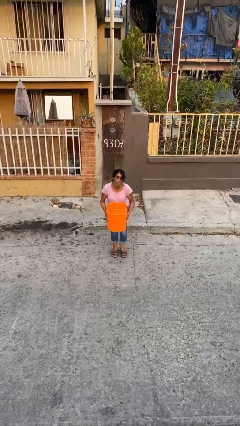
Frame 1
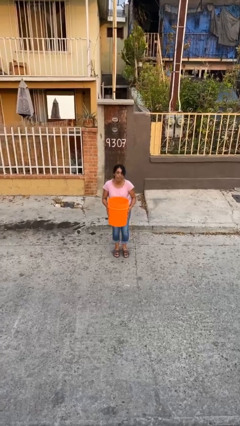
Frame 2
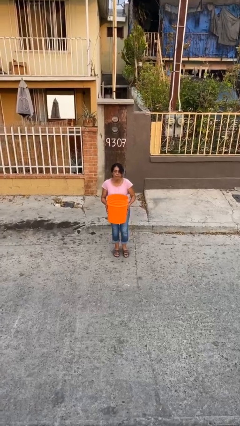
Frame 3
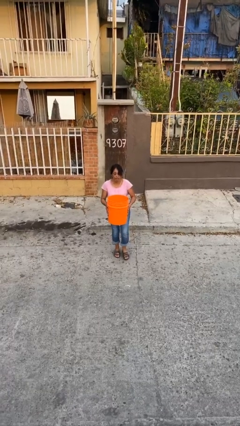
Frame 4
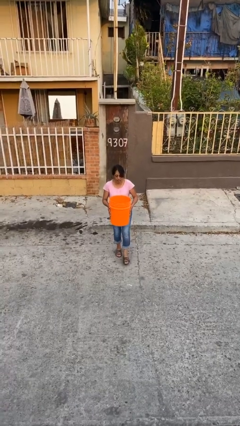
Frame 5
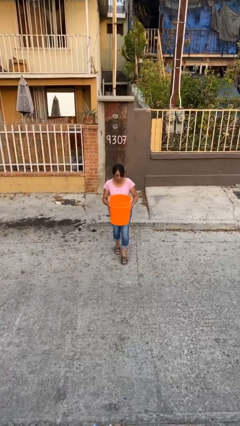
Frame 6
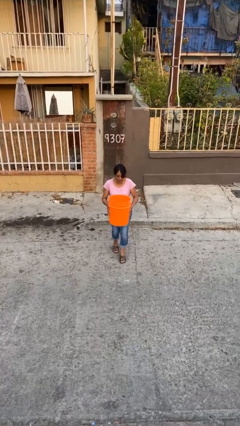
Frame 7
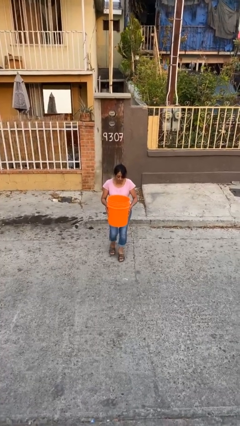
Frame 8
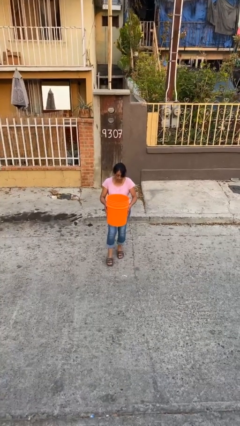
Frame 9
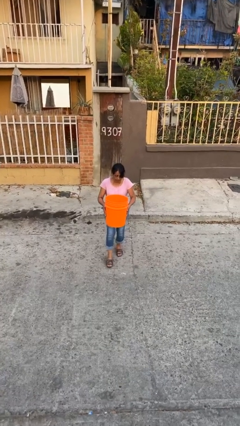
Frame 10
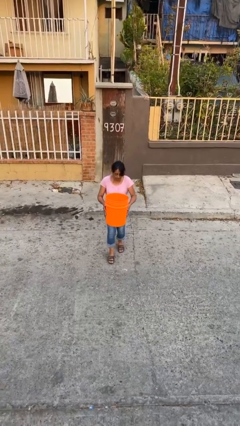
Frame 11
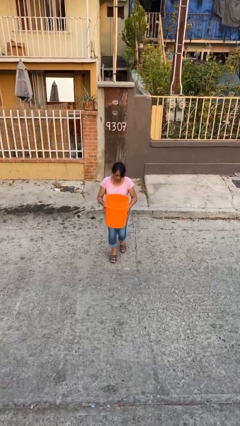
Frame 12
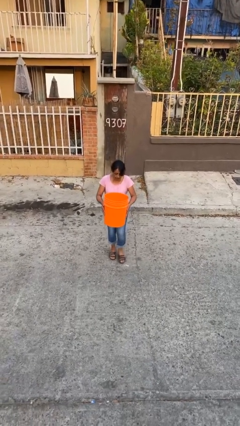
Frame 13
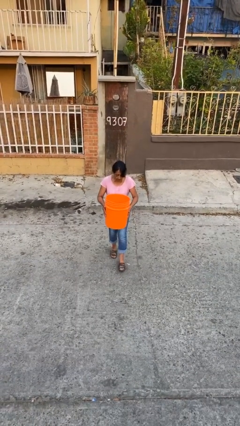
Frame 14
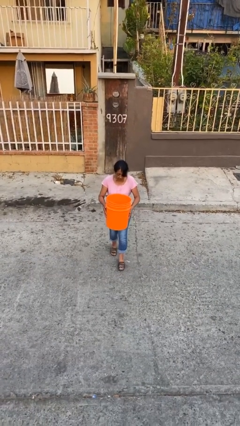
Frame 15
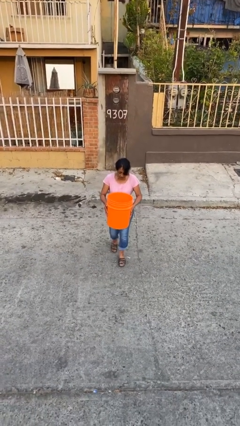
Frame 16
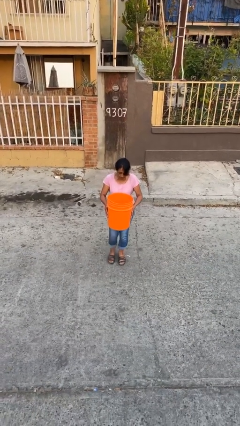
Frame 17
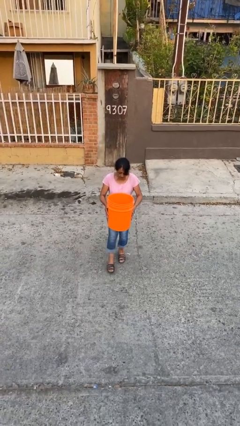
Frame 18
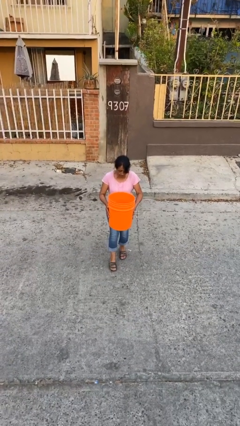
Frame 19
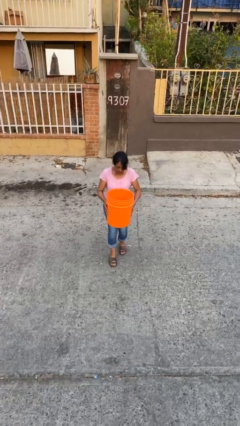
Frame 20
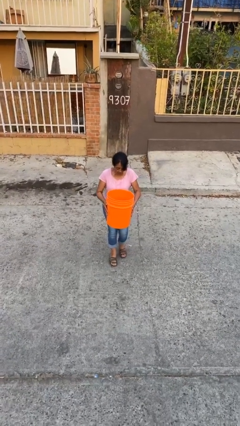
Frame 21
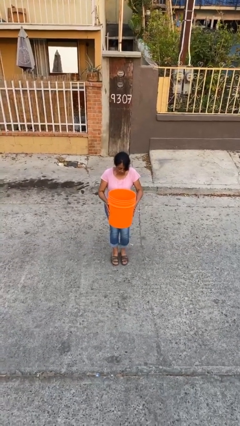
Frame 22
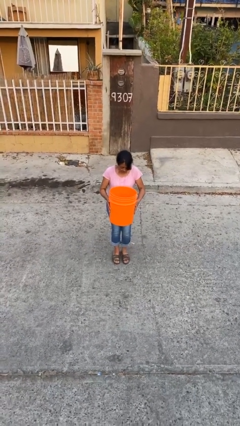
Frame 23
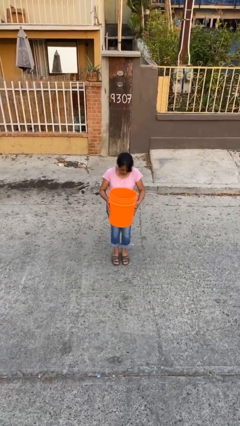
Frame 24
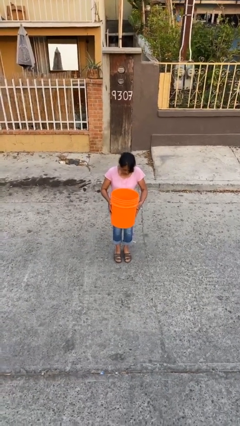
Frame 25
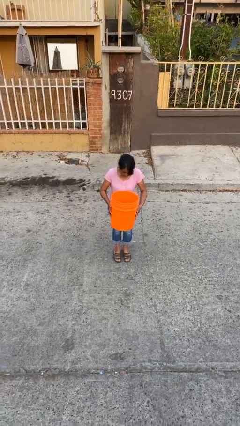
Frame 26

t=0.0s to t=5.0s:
person carries heavy object

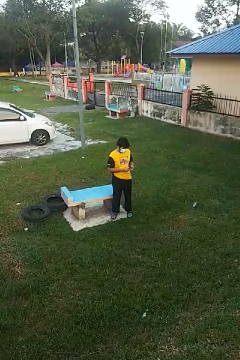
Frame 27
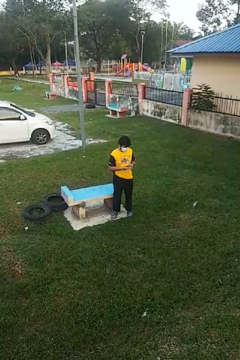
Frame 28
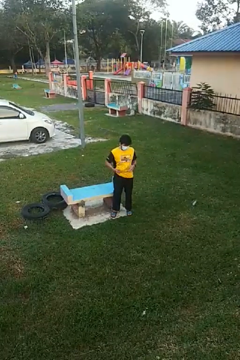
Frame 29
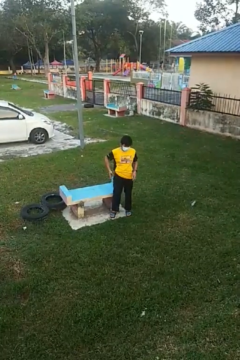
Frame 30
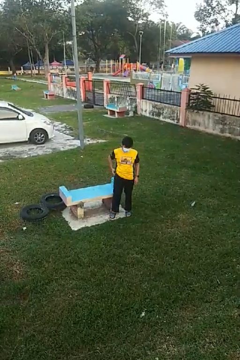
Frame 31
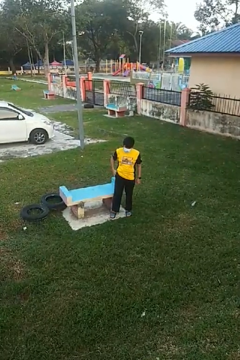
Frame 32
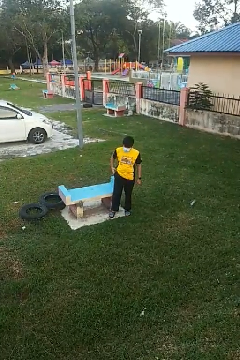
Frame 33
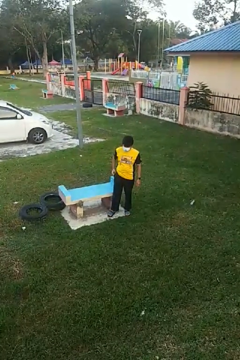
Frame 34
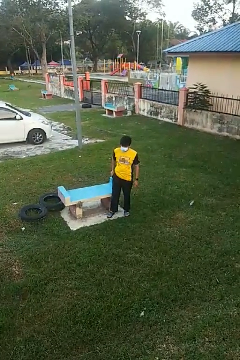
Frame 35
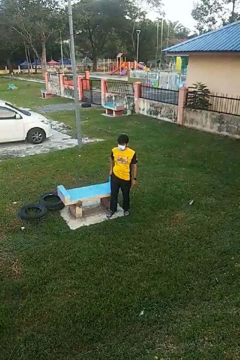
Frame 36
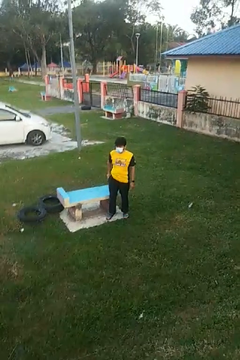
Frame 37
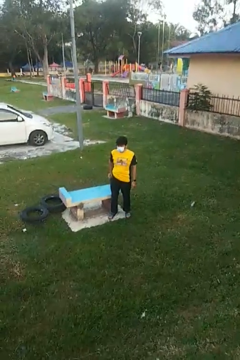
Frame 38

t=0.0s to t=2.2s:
person puts phone into pocket

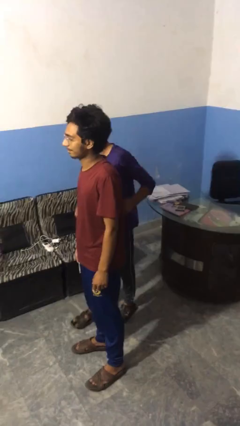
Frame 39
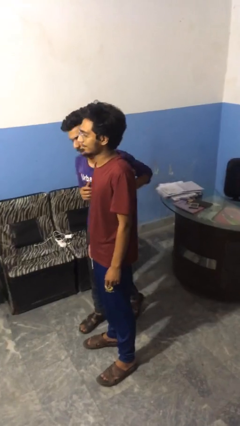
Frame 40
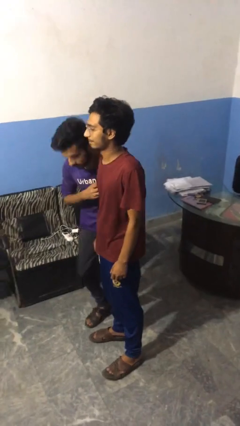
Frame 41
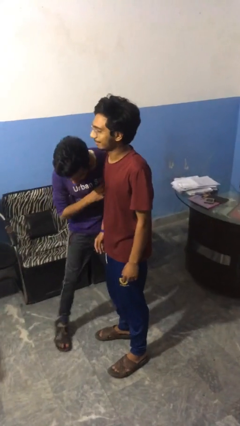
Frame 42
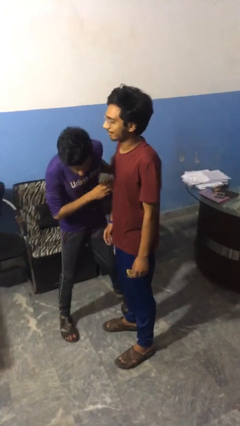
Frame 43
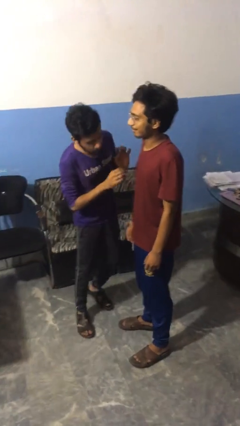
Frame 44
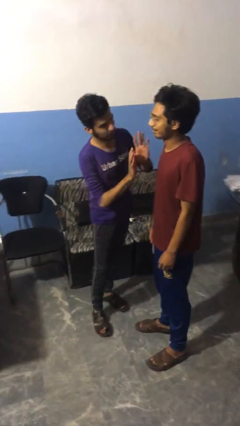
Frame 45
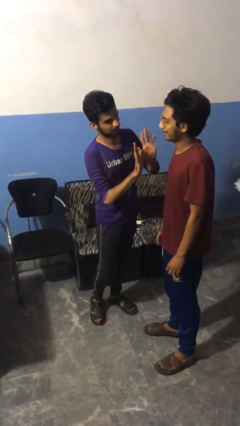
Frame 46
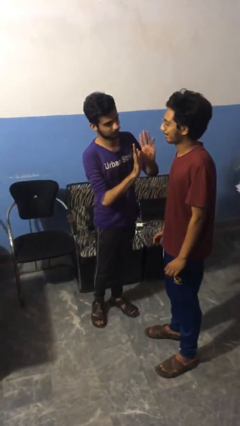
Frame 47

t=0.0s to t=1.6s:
person bumps into person

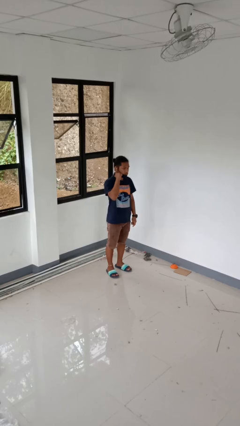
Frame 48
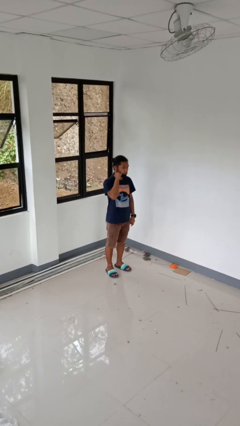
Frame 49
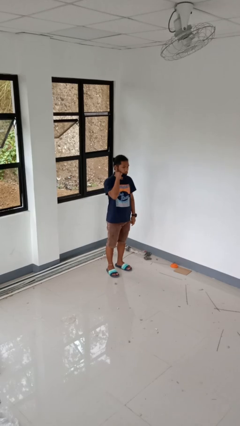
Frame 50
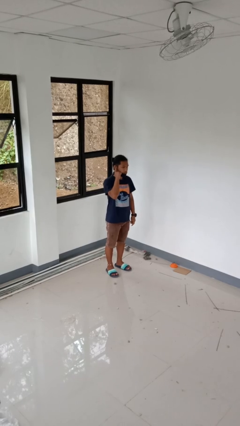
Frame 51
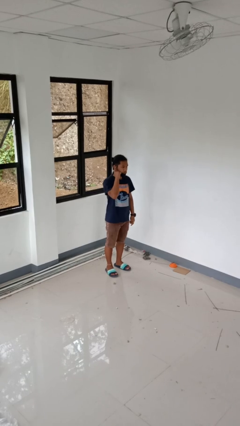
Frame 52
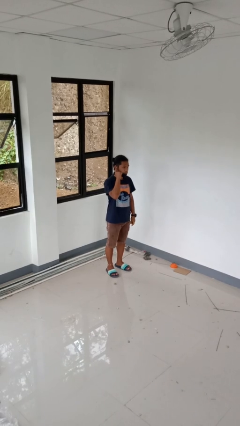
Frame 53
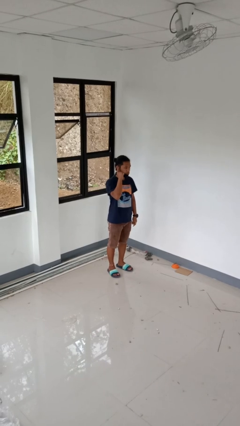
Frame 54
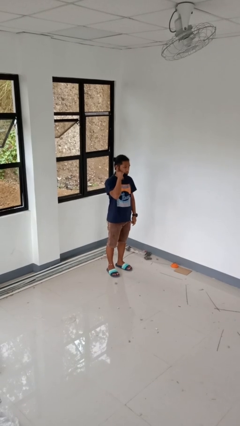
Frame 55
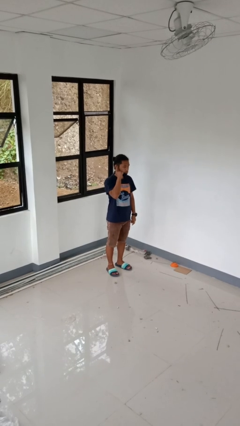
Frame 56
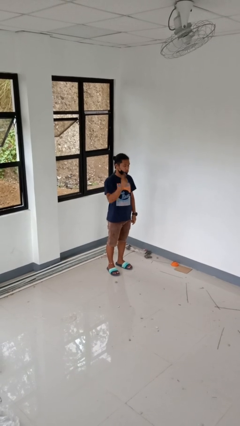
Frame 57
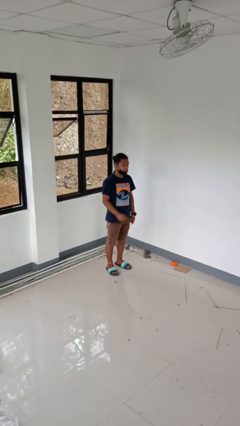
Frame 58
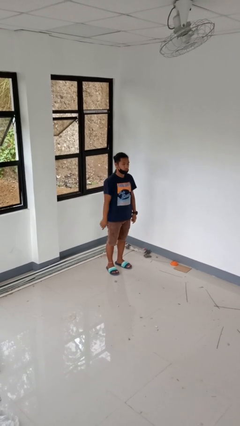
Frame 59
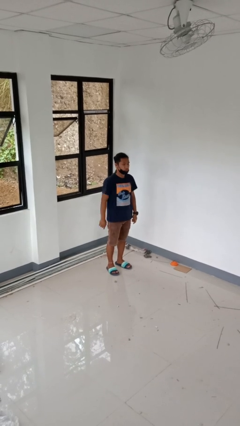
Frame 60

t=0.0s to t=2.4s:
person gestures listen closely

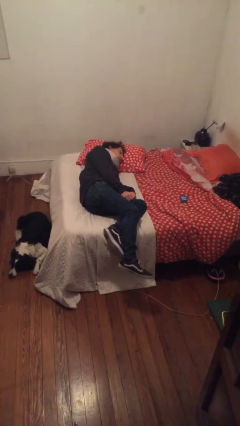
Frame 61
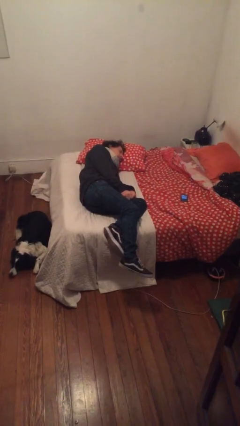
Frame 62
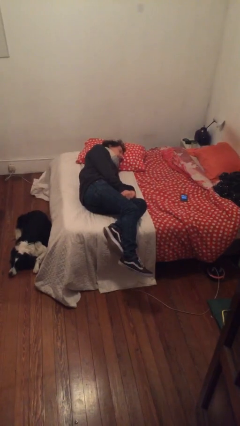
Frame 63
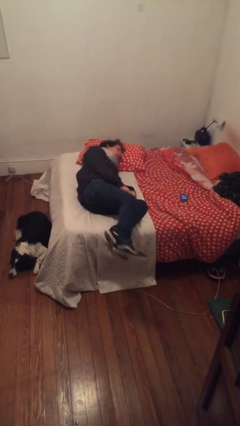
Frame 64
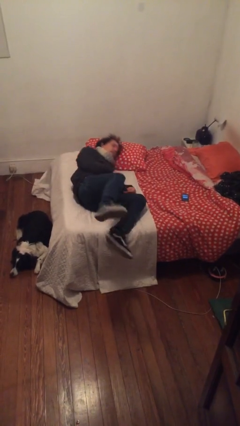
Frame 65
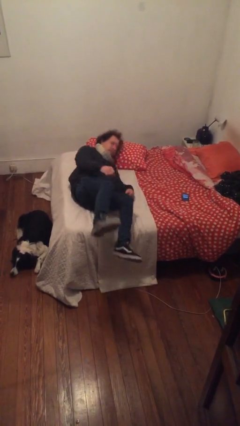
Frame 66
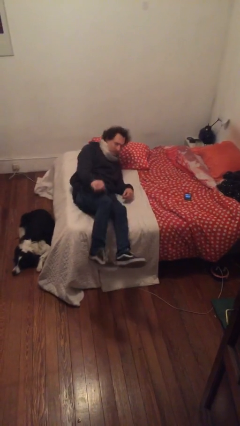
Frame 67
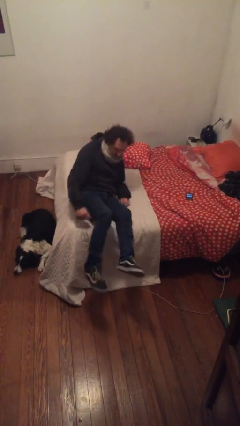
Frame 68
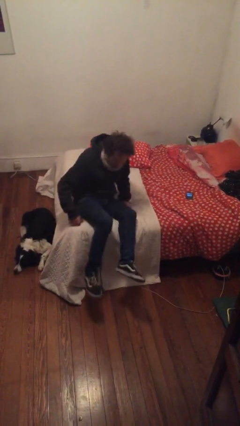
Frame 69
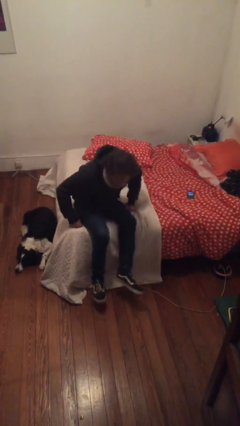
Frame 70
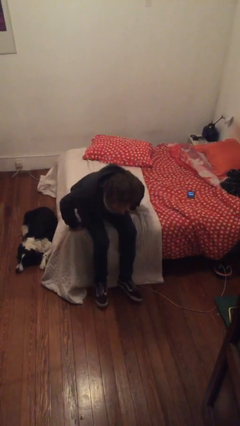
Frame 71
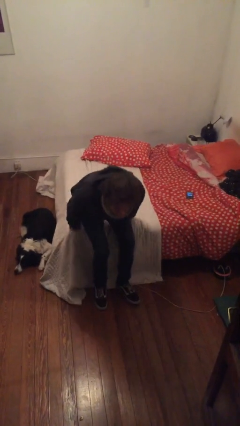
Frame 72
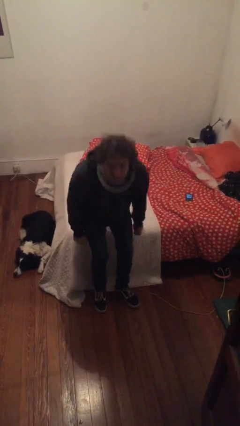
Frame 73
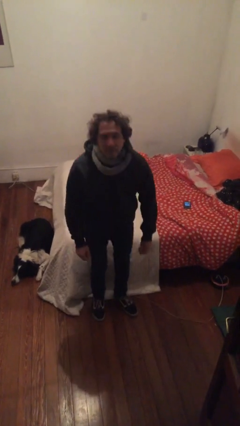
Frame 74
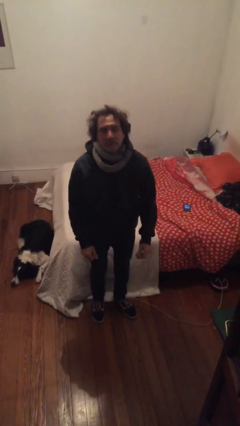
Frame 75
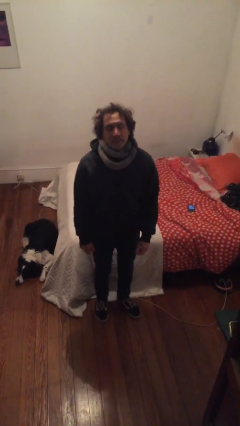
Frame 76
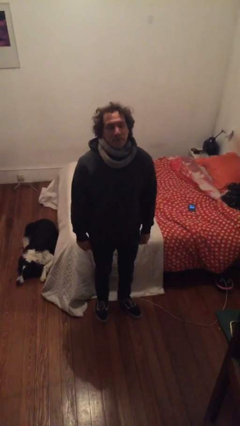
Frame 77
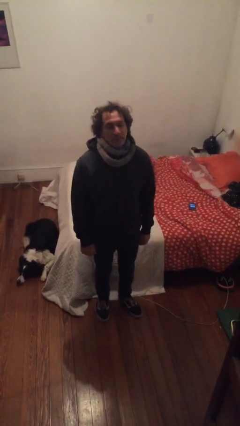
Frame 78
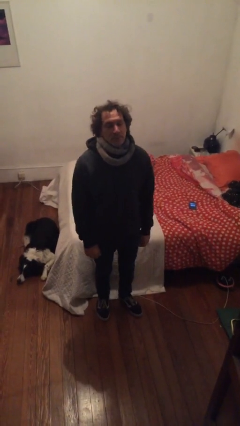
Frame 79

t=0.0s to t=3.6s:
person stands up

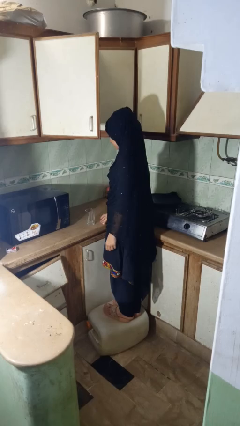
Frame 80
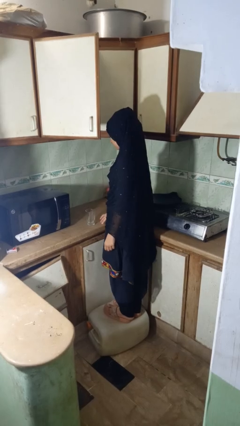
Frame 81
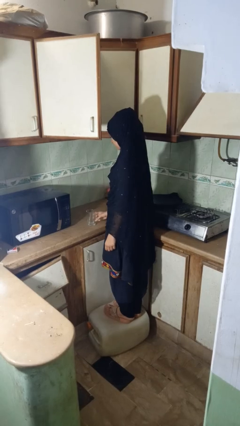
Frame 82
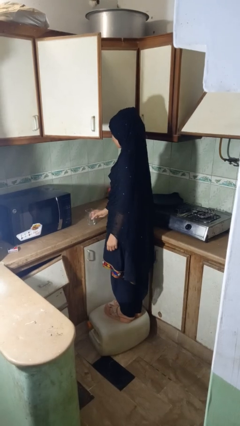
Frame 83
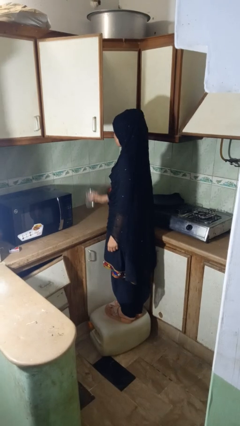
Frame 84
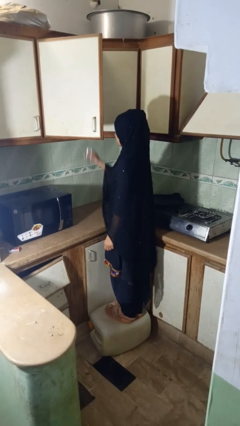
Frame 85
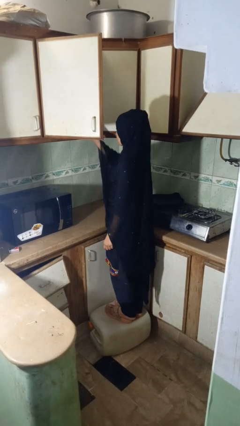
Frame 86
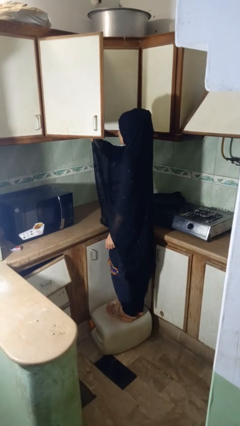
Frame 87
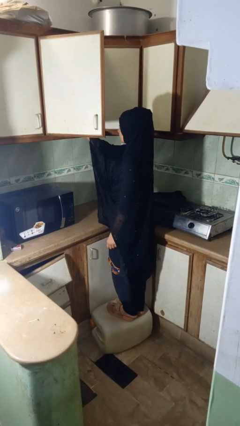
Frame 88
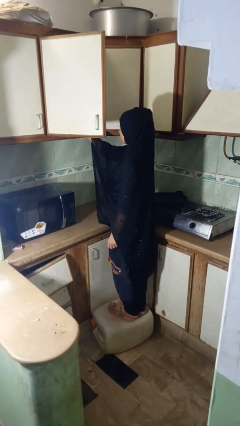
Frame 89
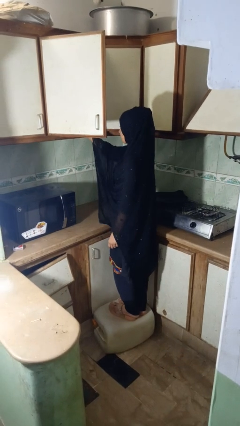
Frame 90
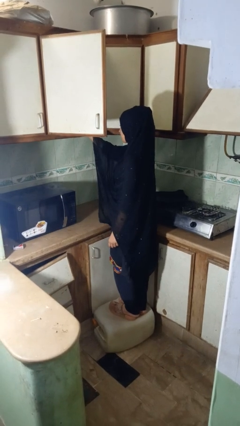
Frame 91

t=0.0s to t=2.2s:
person picks up object from cabinet

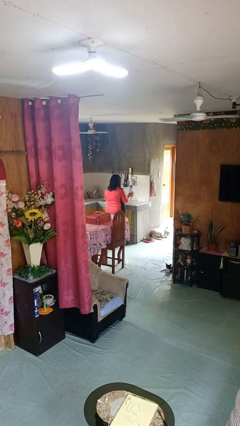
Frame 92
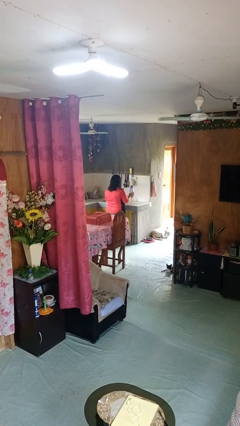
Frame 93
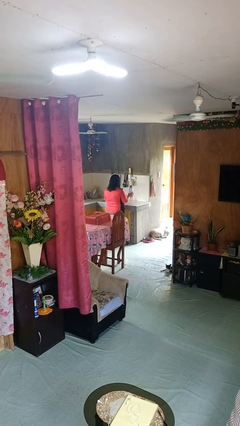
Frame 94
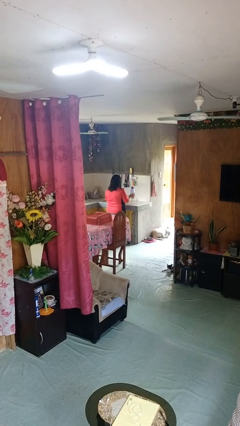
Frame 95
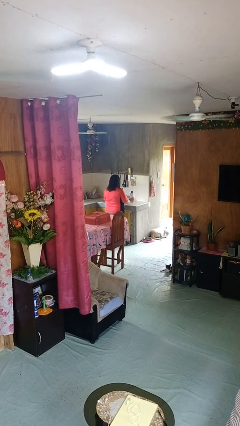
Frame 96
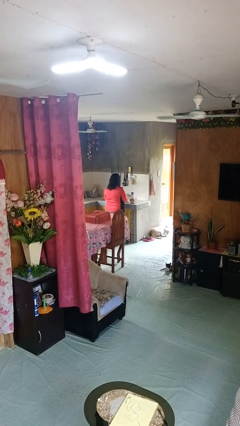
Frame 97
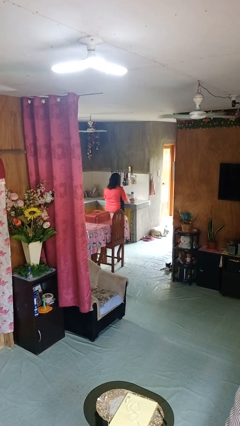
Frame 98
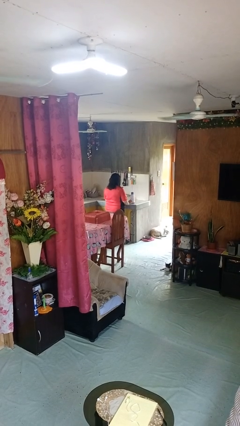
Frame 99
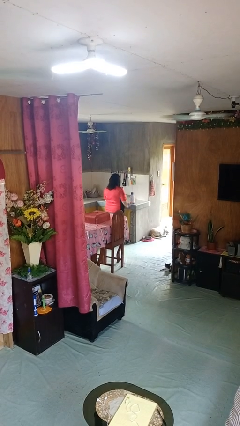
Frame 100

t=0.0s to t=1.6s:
person puts down object on countertop
